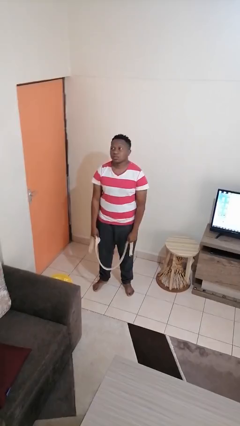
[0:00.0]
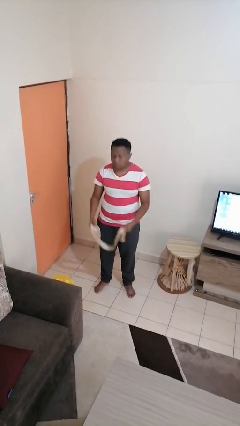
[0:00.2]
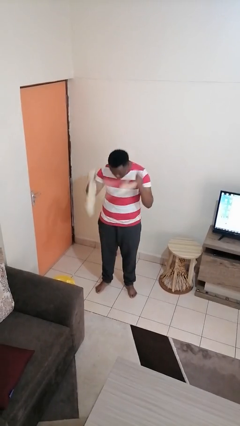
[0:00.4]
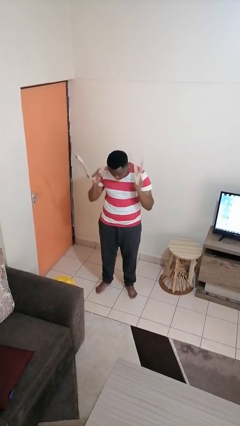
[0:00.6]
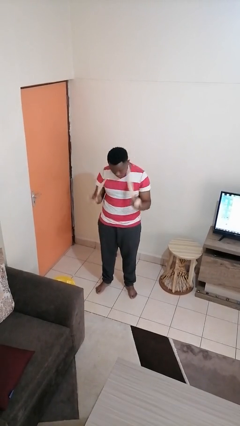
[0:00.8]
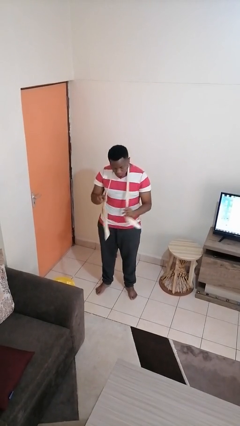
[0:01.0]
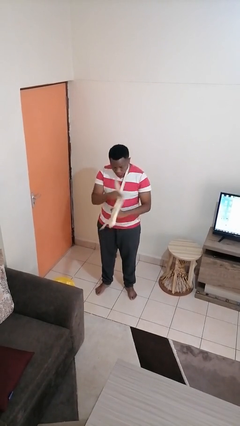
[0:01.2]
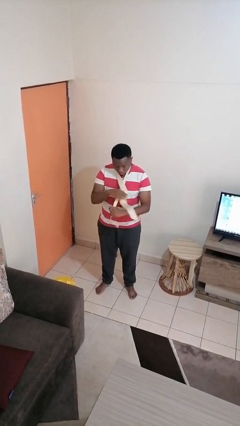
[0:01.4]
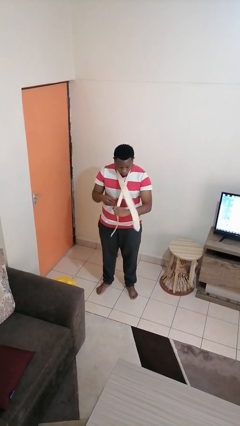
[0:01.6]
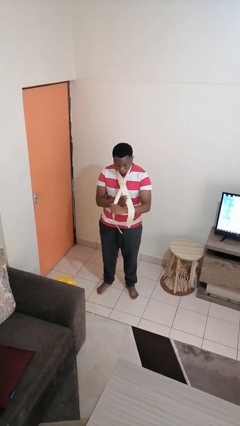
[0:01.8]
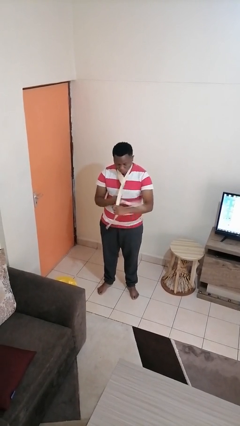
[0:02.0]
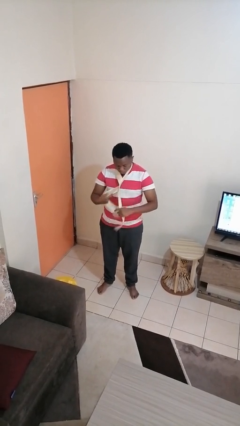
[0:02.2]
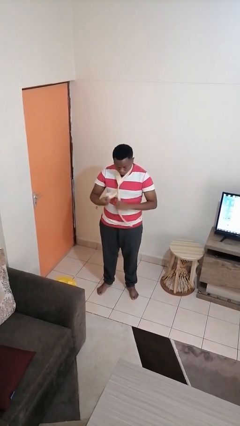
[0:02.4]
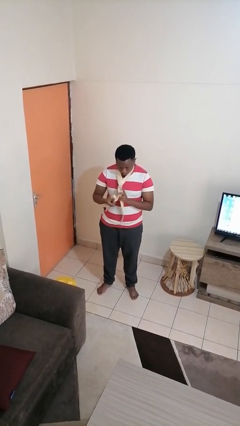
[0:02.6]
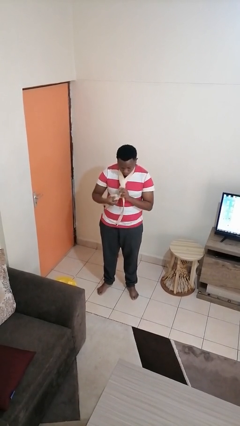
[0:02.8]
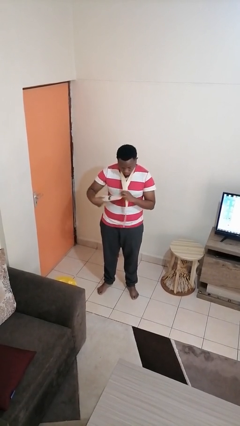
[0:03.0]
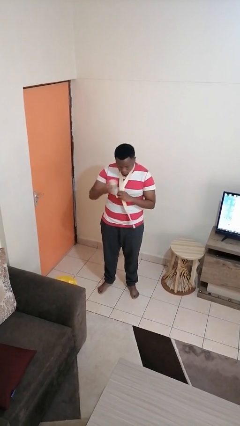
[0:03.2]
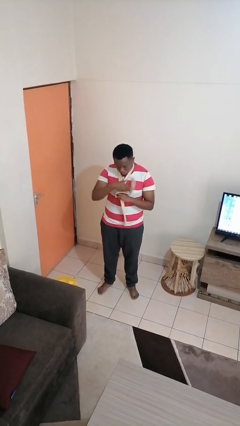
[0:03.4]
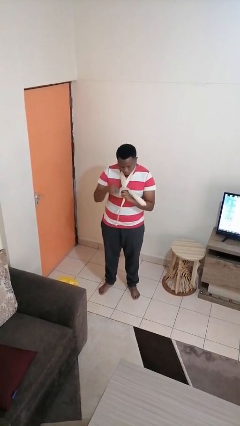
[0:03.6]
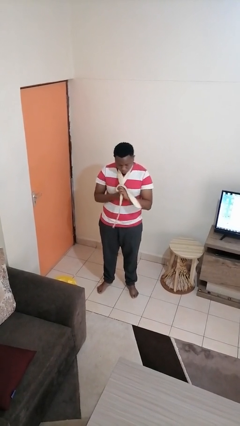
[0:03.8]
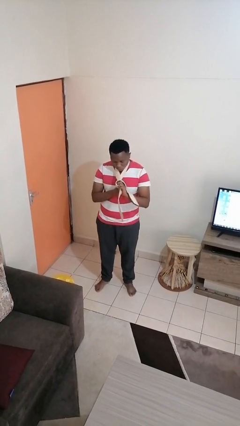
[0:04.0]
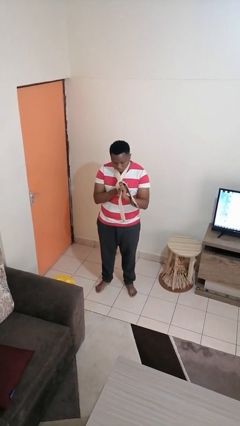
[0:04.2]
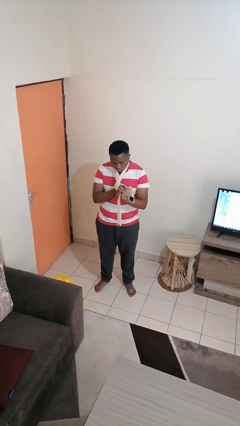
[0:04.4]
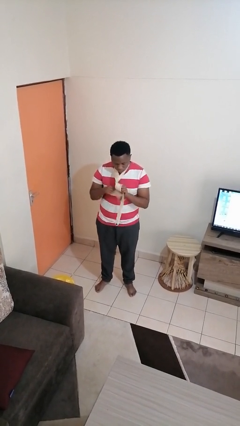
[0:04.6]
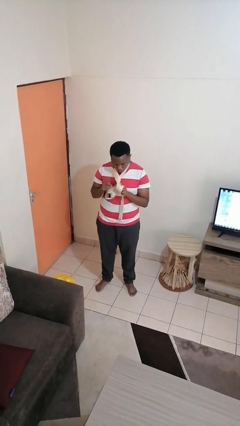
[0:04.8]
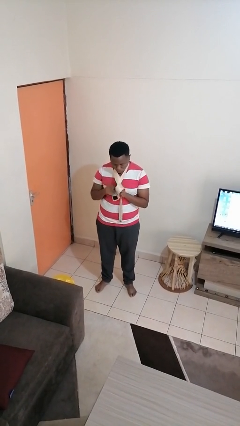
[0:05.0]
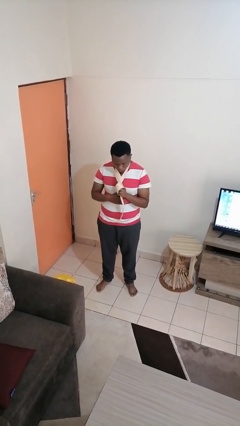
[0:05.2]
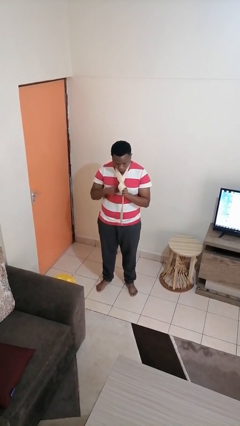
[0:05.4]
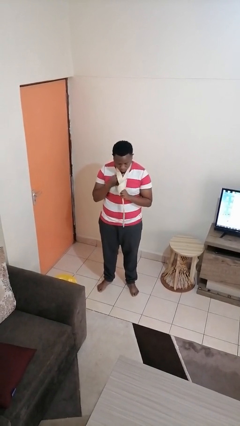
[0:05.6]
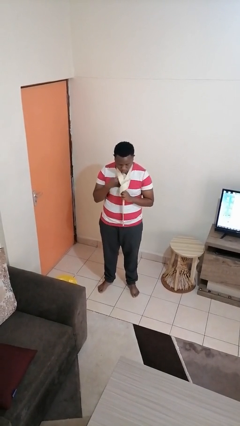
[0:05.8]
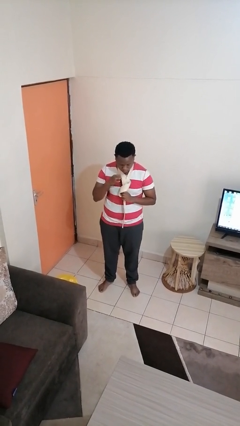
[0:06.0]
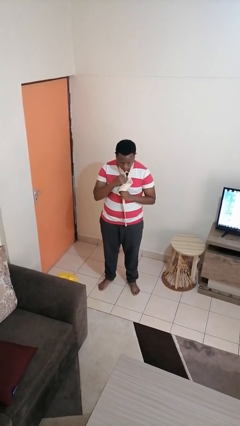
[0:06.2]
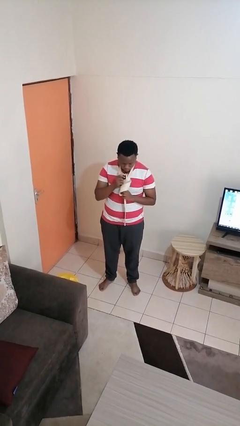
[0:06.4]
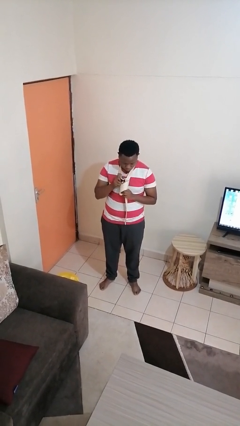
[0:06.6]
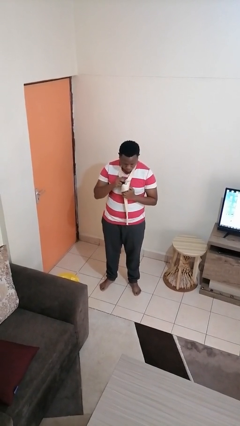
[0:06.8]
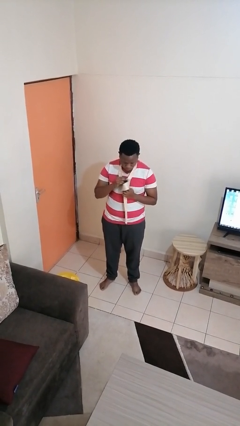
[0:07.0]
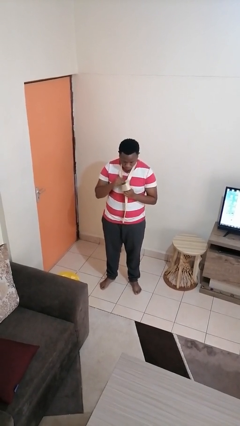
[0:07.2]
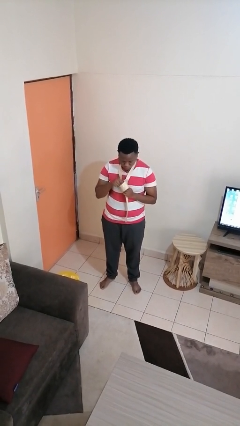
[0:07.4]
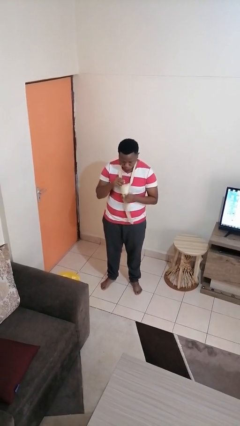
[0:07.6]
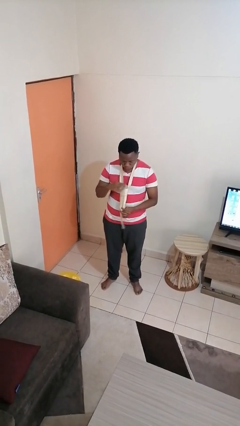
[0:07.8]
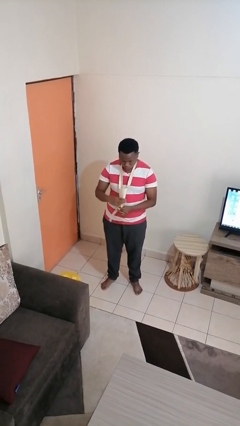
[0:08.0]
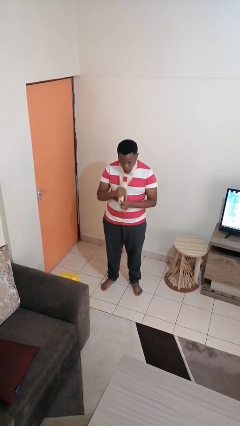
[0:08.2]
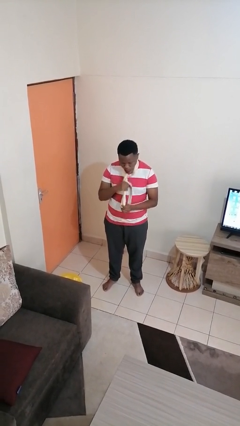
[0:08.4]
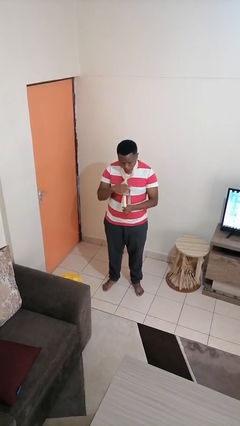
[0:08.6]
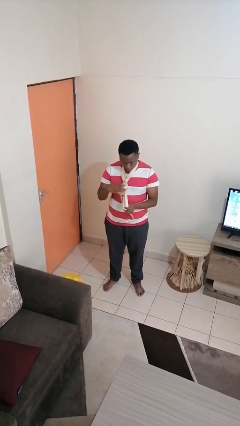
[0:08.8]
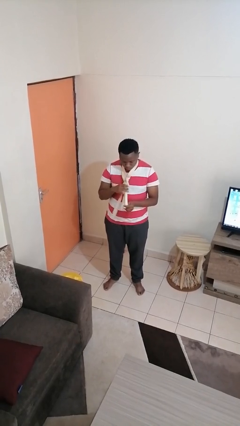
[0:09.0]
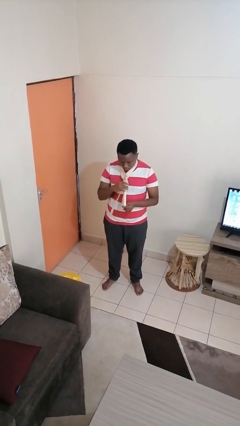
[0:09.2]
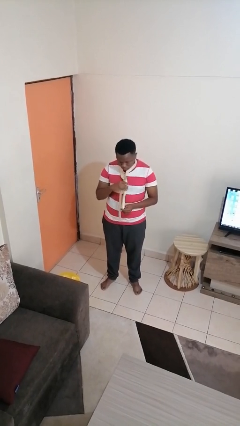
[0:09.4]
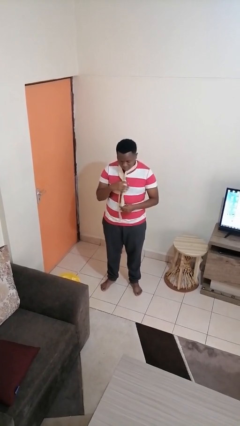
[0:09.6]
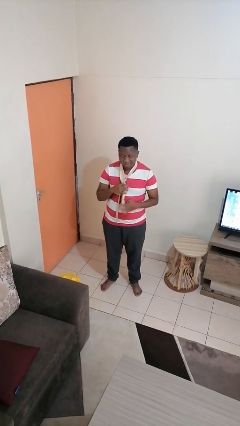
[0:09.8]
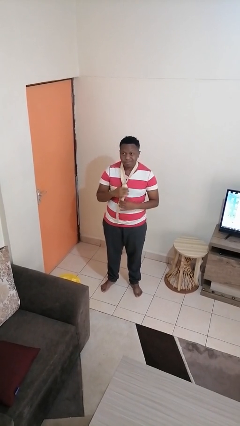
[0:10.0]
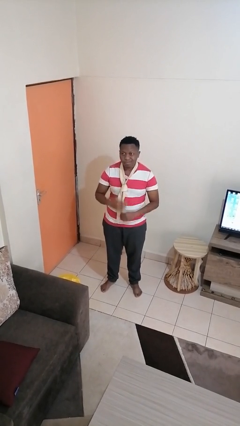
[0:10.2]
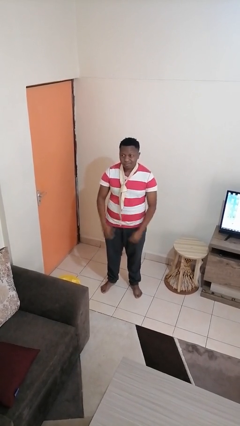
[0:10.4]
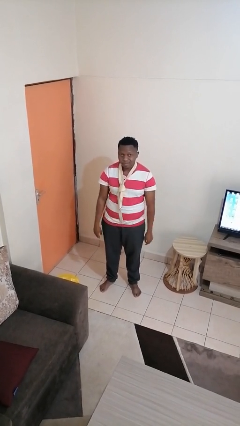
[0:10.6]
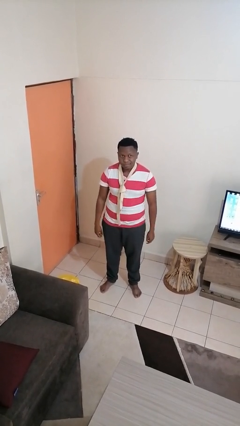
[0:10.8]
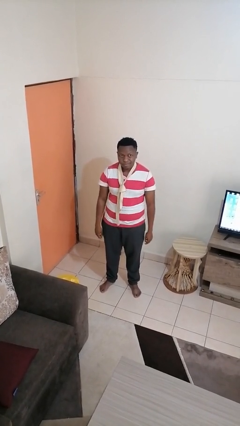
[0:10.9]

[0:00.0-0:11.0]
person puts on necktie

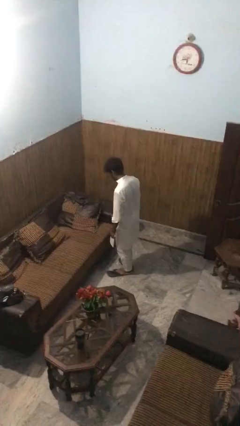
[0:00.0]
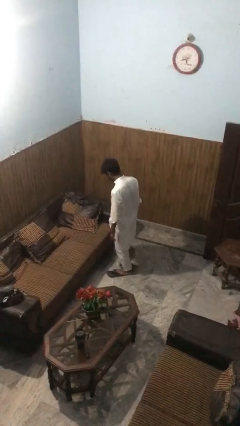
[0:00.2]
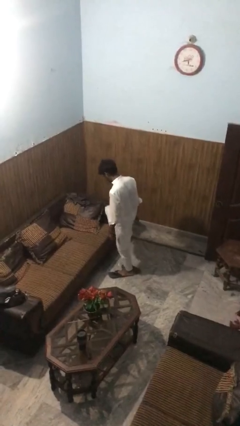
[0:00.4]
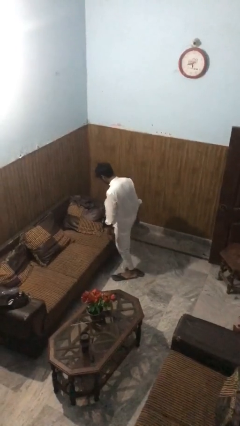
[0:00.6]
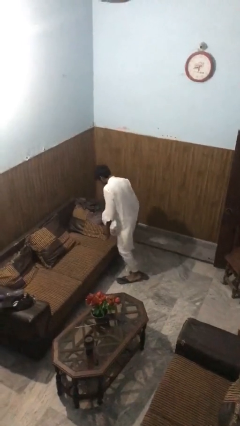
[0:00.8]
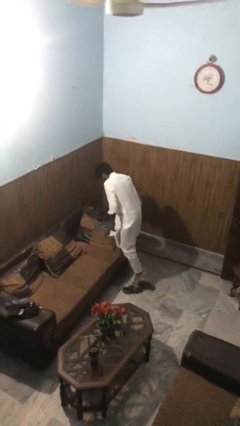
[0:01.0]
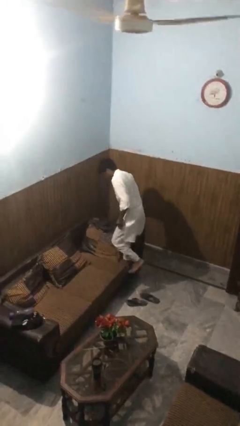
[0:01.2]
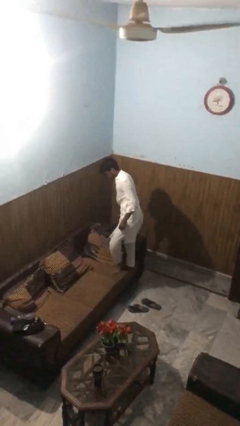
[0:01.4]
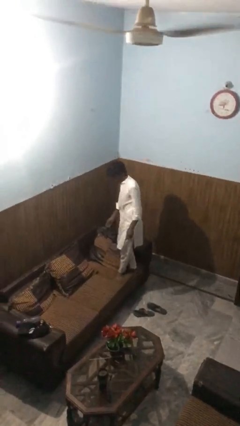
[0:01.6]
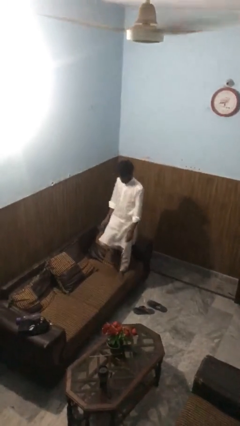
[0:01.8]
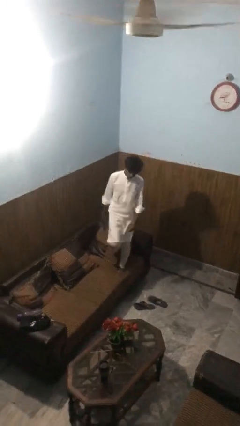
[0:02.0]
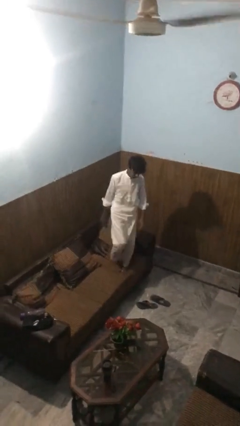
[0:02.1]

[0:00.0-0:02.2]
person climbs on couch

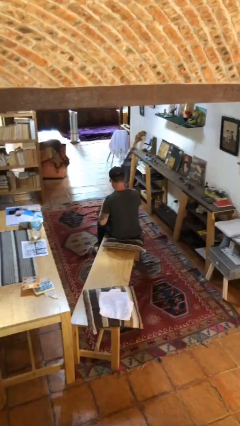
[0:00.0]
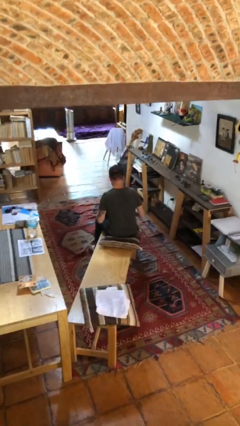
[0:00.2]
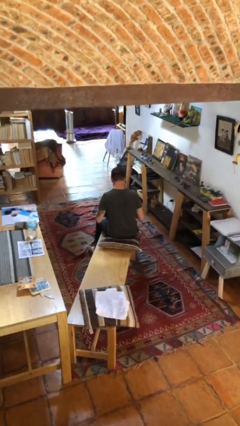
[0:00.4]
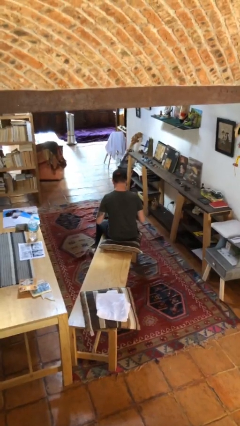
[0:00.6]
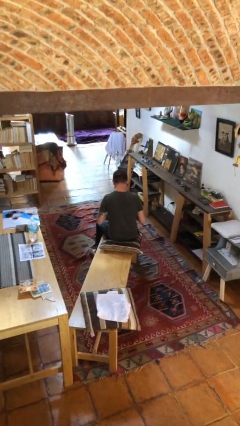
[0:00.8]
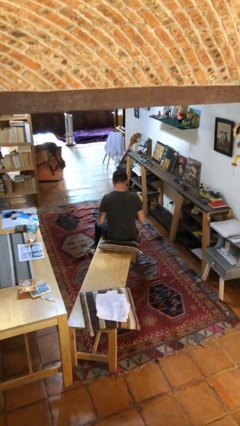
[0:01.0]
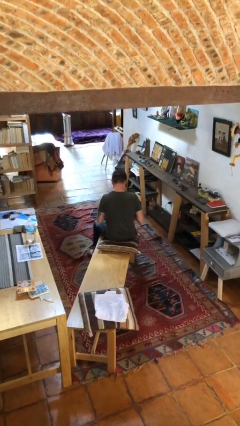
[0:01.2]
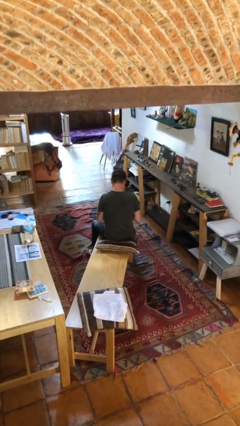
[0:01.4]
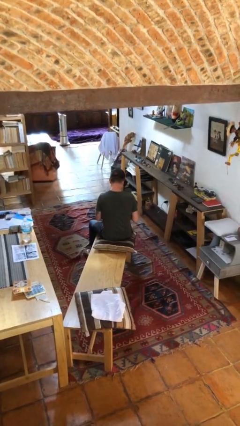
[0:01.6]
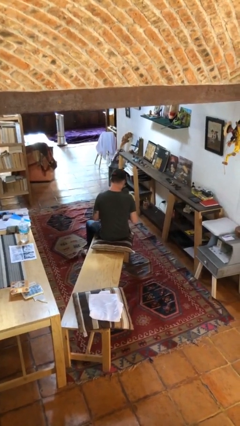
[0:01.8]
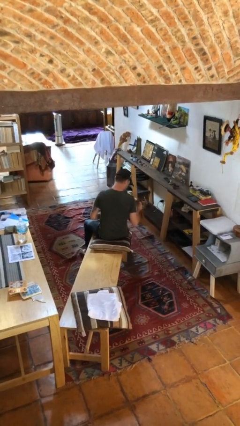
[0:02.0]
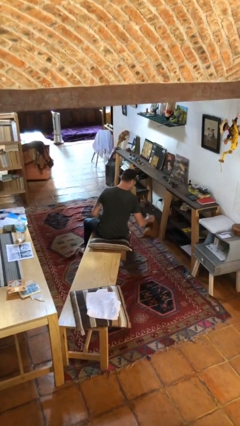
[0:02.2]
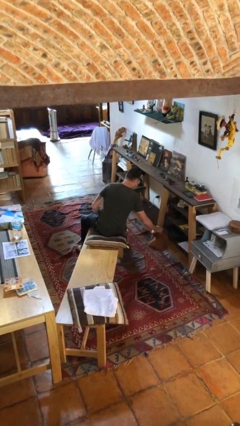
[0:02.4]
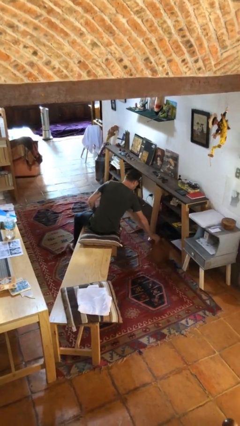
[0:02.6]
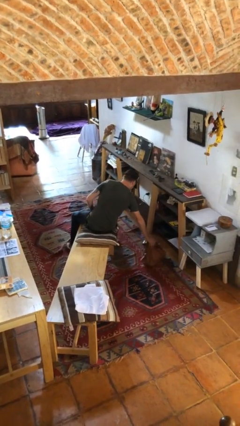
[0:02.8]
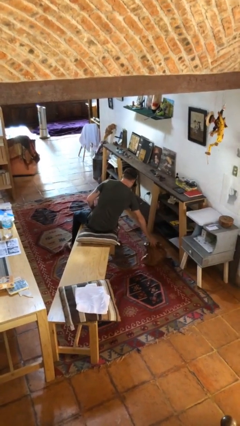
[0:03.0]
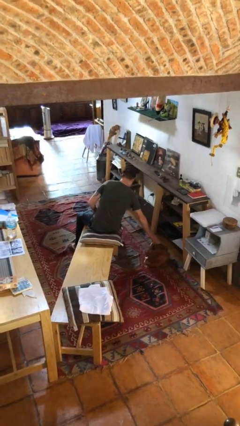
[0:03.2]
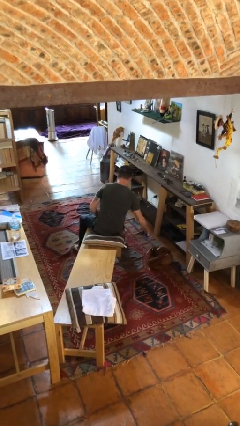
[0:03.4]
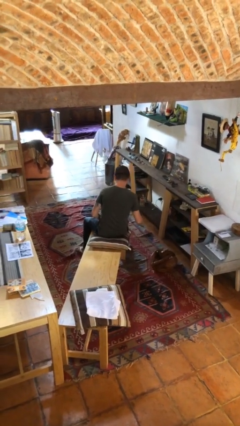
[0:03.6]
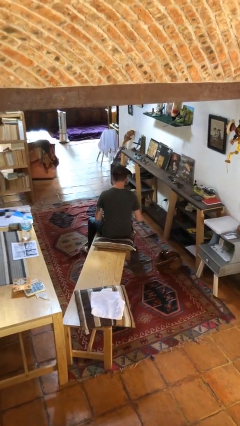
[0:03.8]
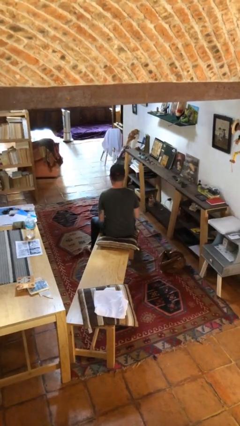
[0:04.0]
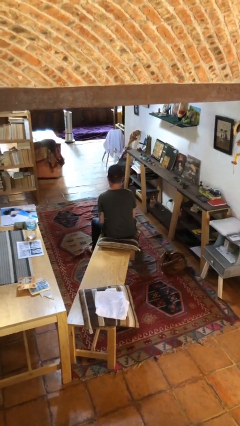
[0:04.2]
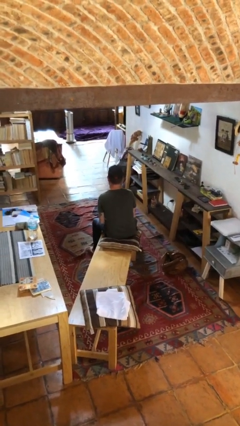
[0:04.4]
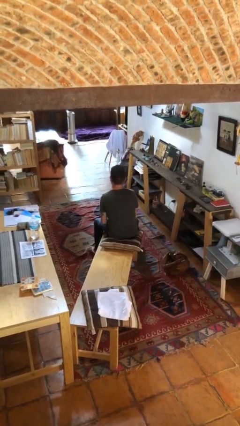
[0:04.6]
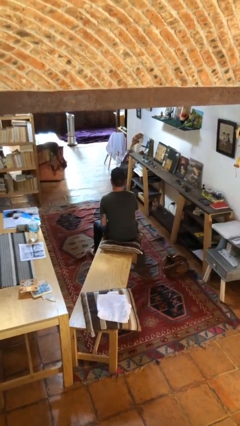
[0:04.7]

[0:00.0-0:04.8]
person puts down object on floor
